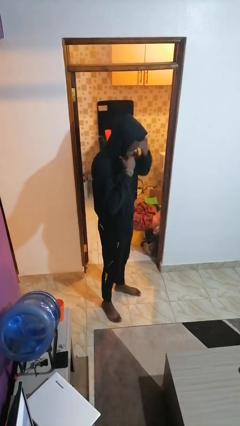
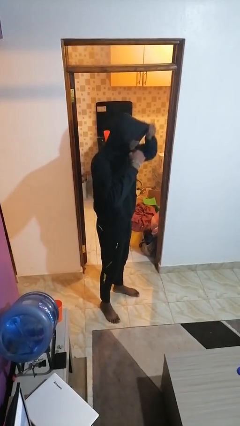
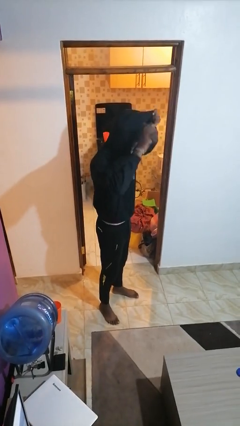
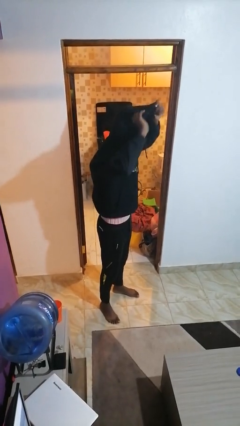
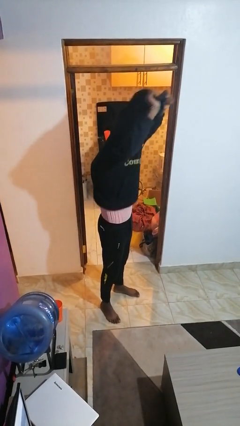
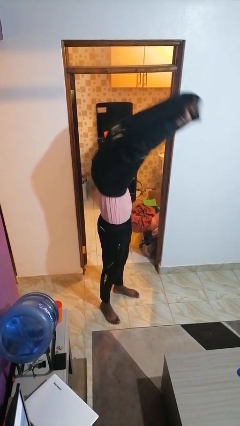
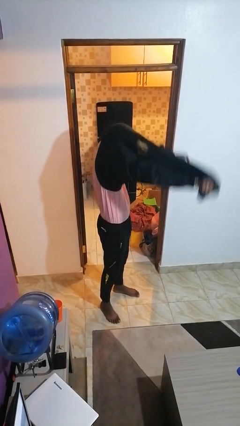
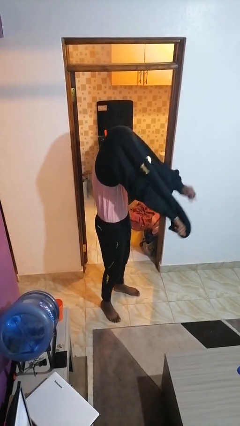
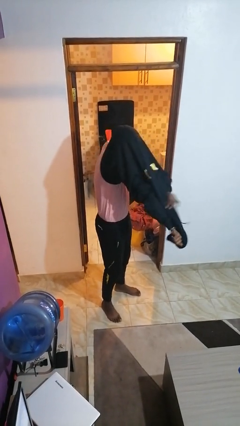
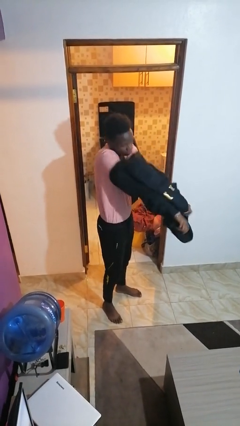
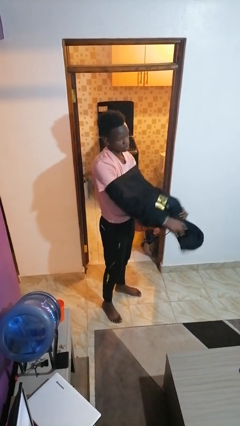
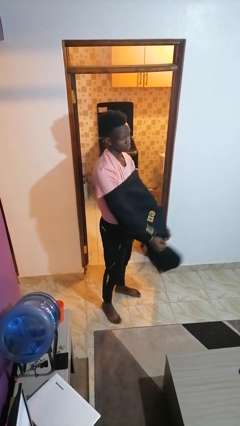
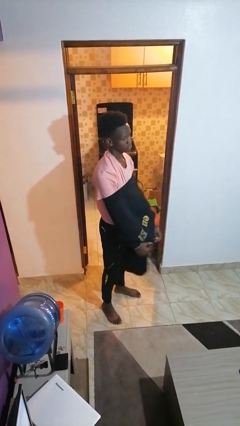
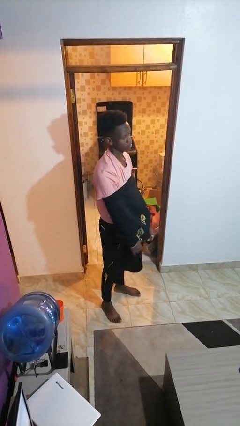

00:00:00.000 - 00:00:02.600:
person takes off hoodie

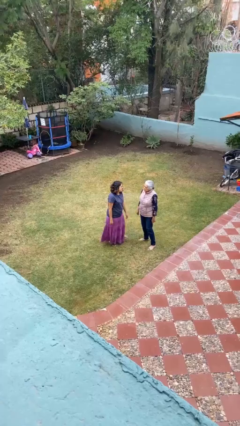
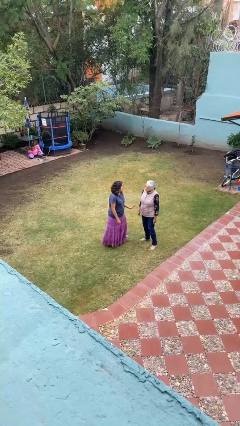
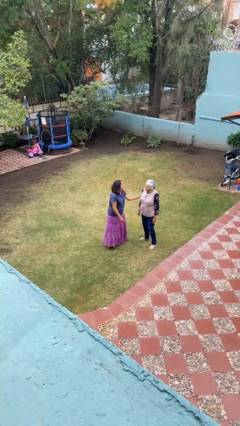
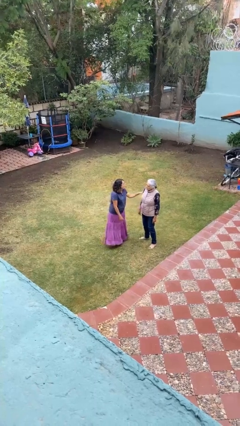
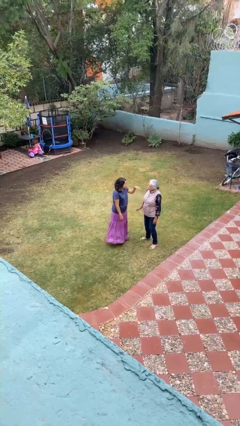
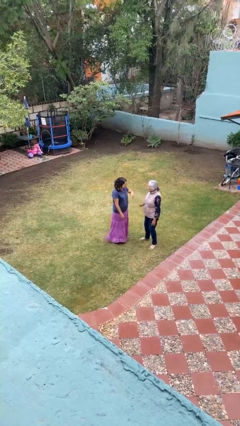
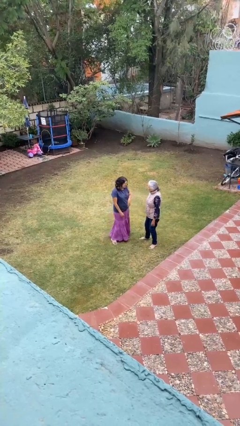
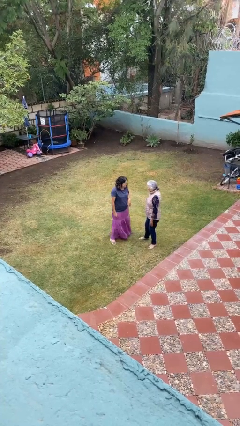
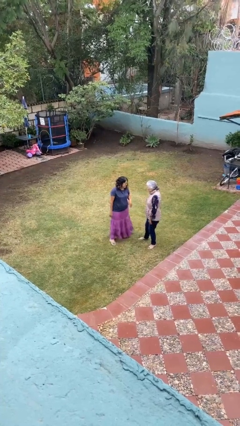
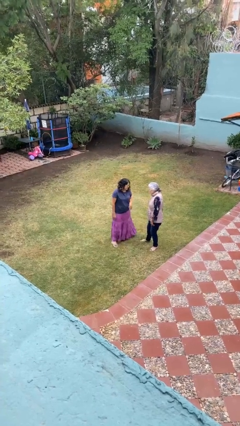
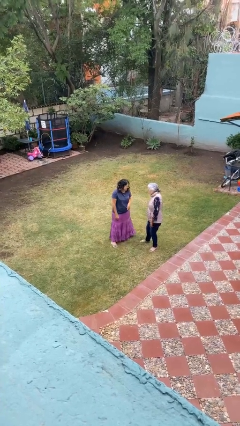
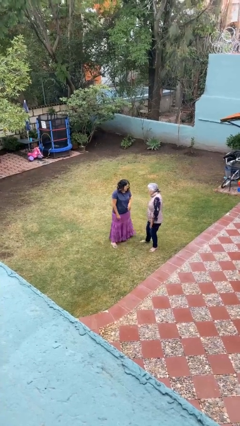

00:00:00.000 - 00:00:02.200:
person shoves person

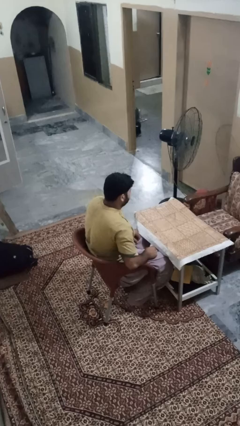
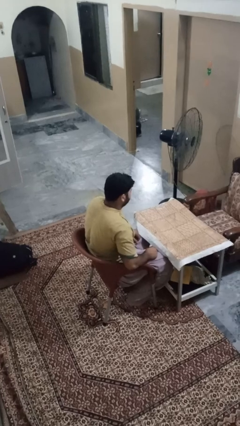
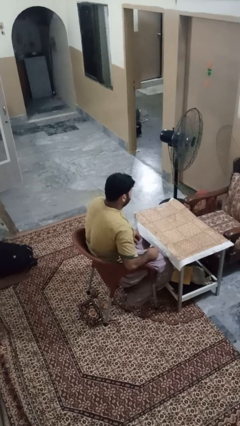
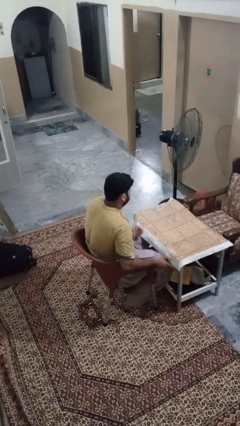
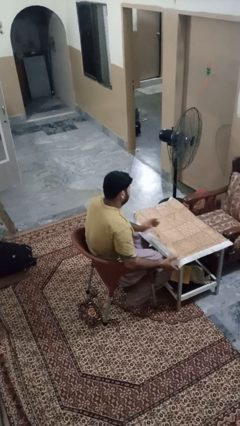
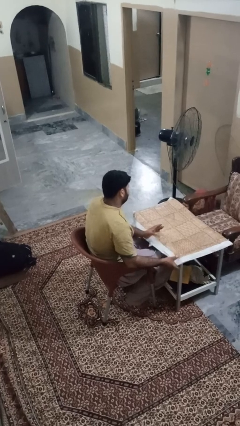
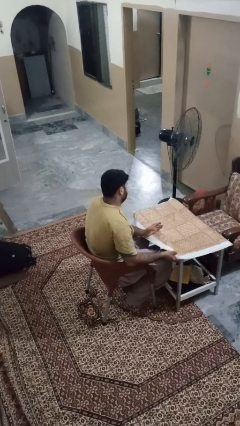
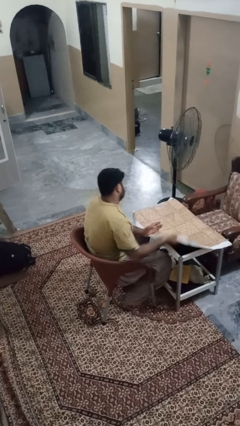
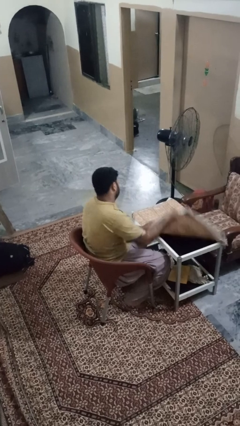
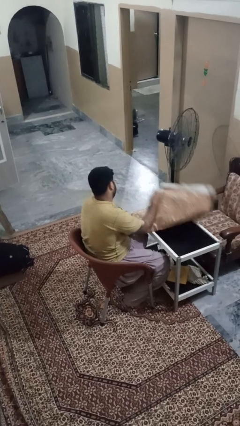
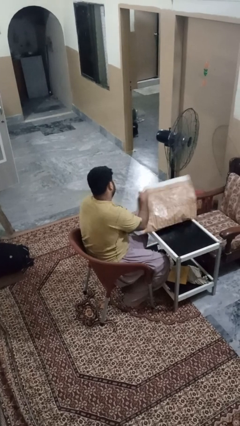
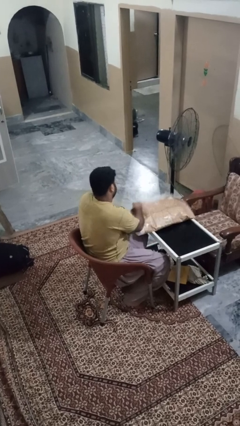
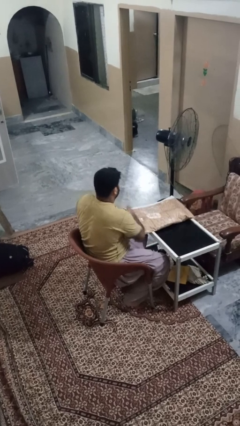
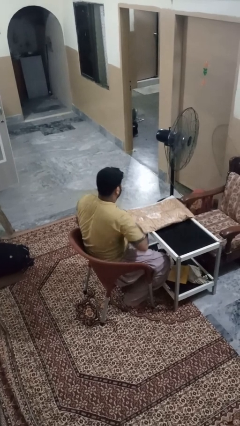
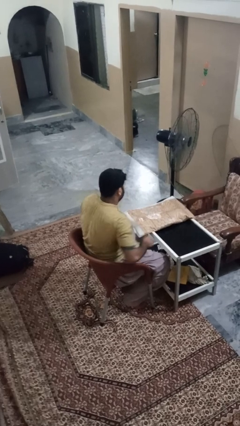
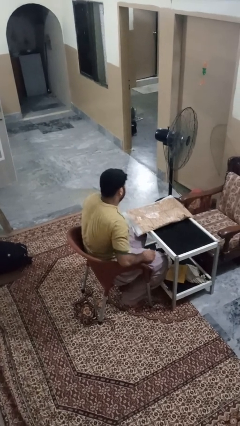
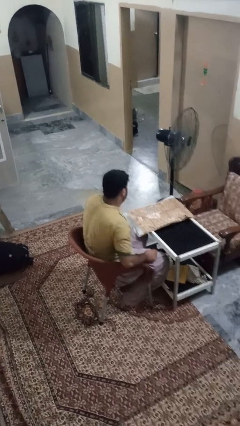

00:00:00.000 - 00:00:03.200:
person folds tablecloth

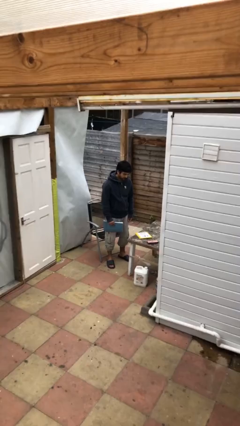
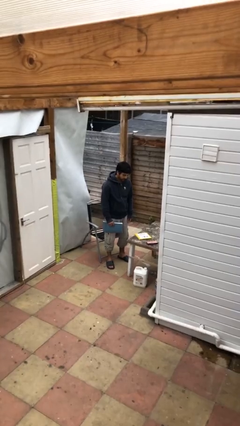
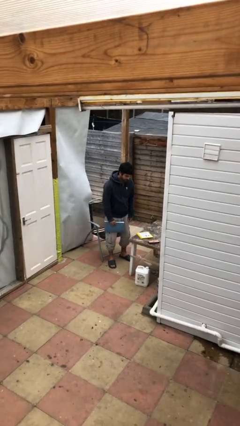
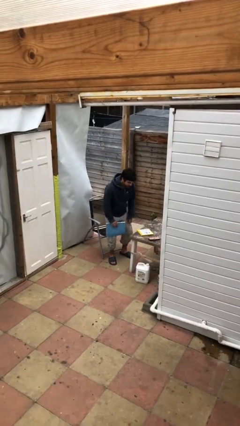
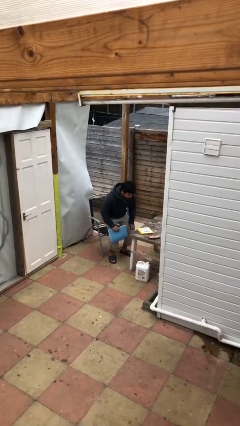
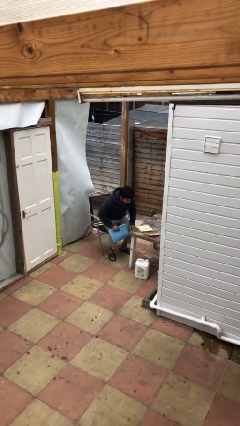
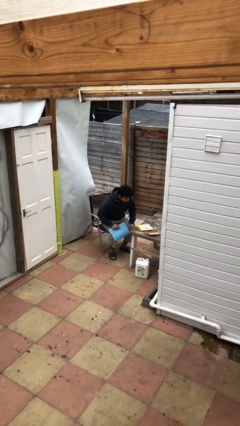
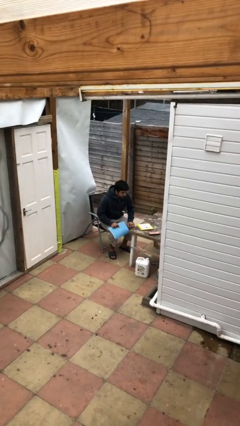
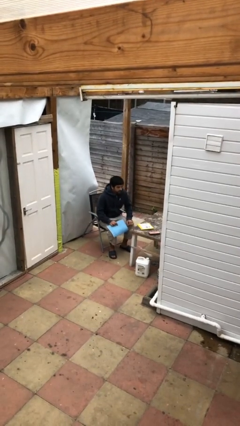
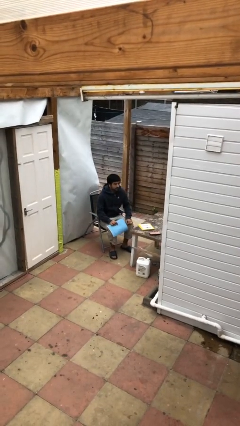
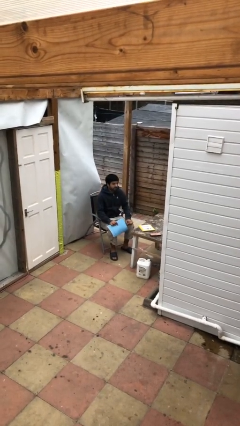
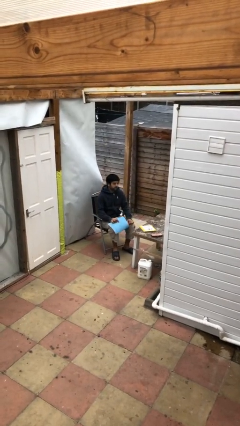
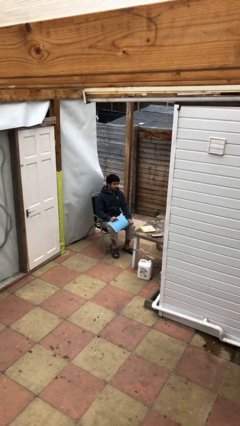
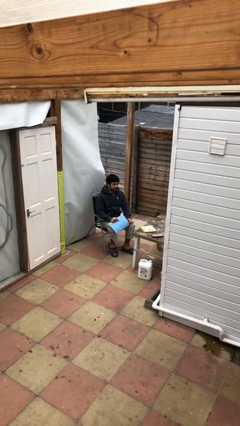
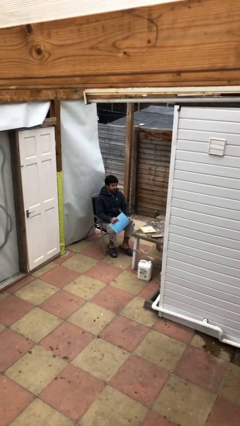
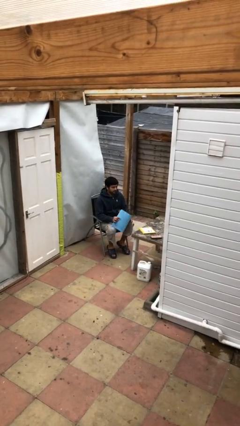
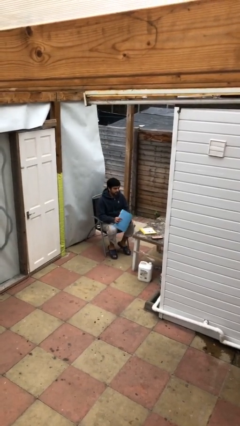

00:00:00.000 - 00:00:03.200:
person sits down

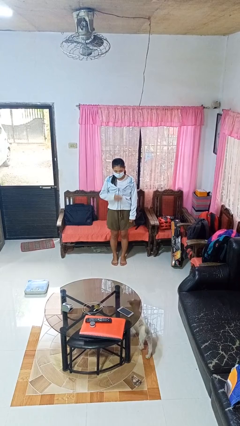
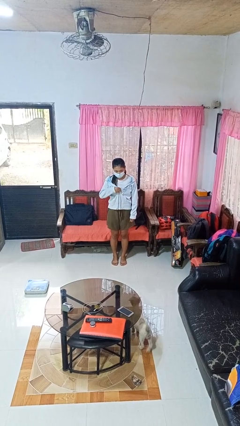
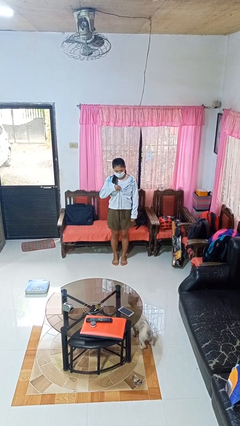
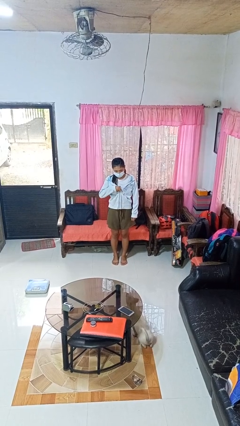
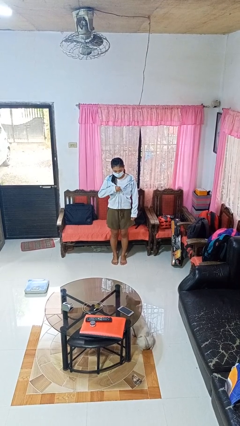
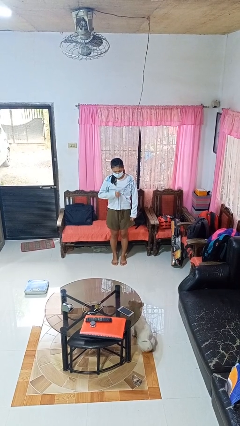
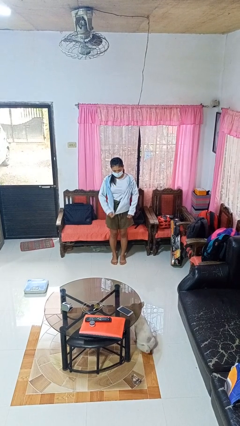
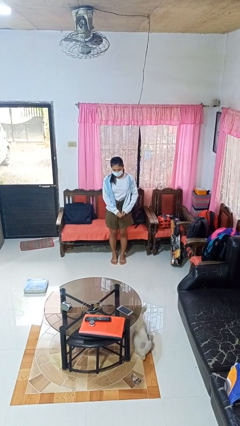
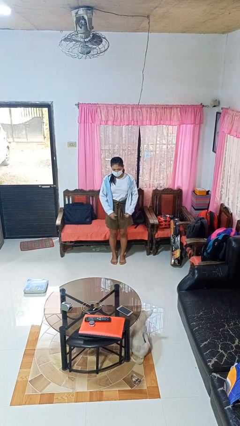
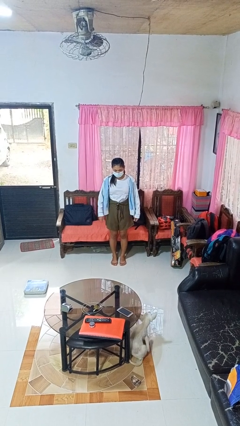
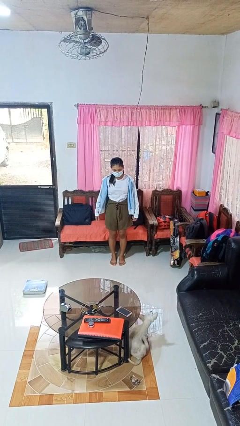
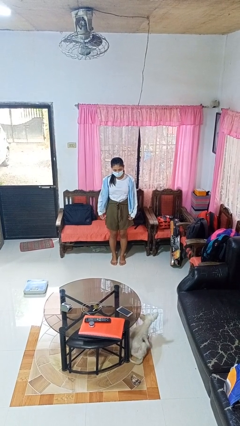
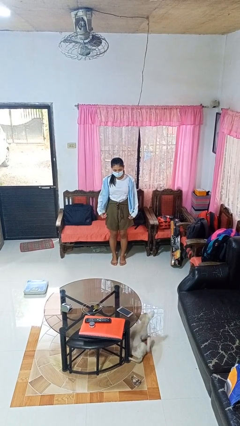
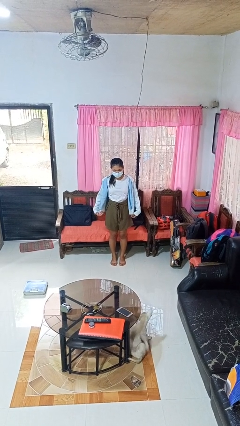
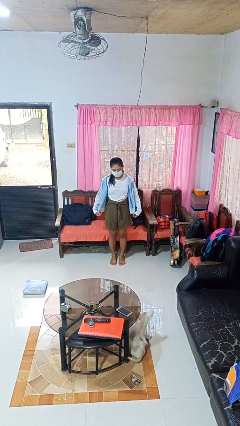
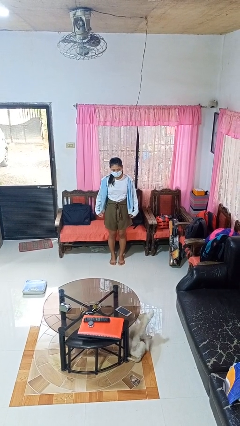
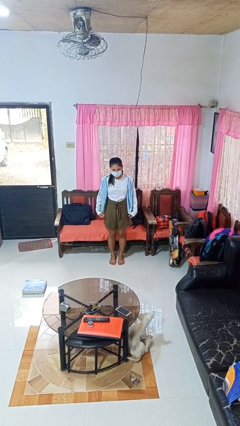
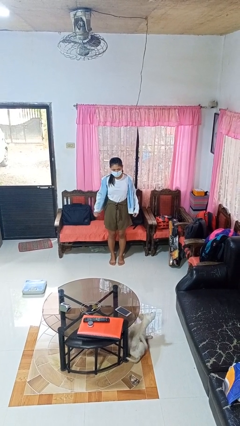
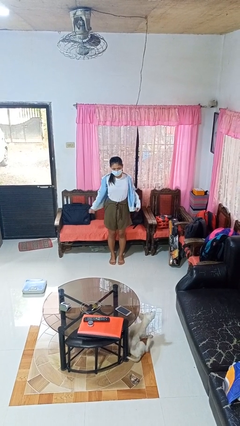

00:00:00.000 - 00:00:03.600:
person unzips jacket

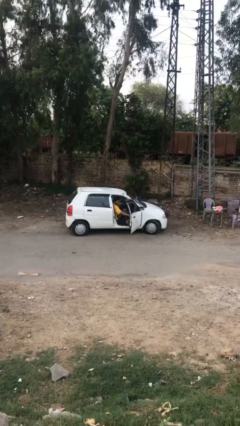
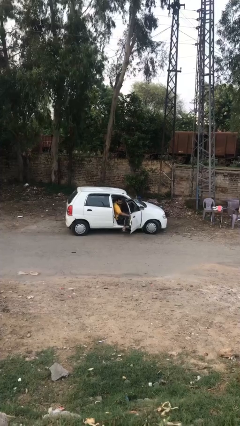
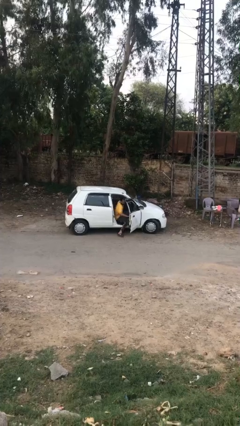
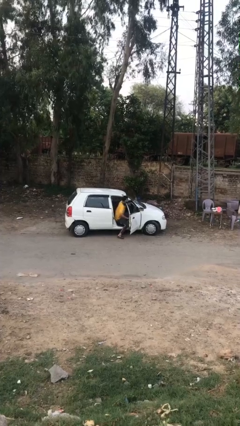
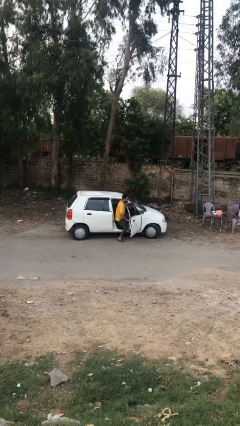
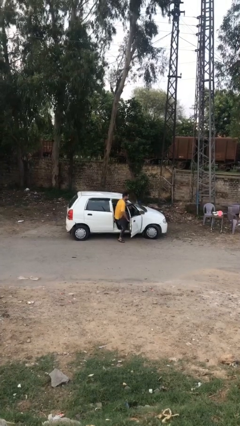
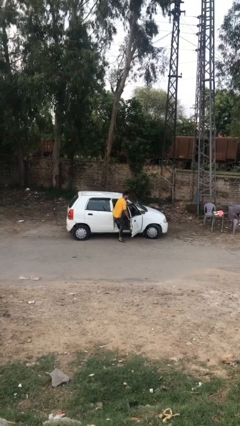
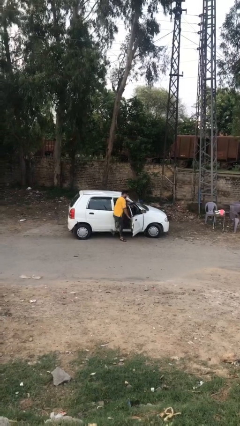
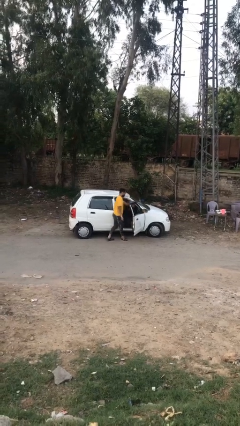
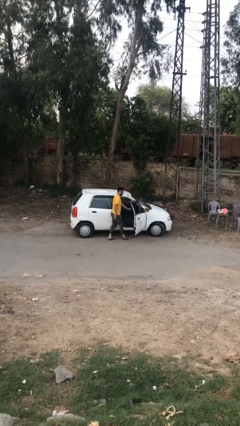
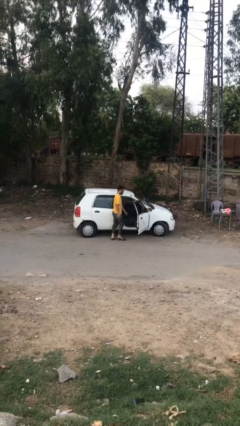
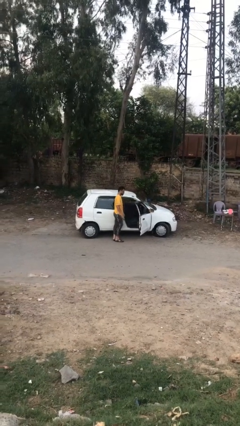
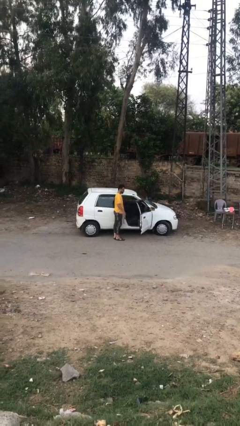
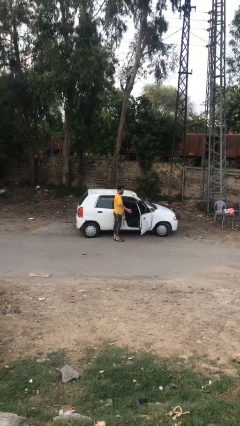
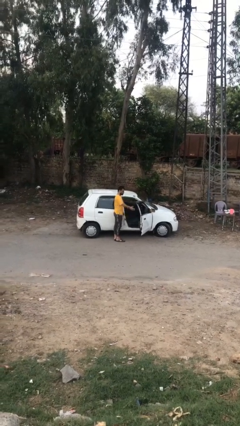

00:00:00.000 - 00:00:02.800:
person exits car
